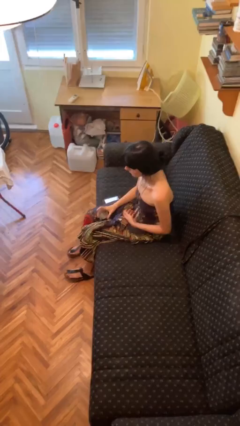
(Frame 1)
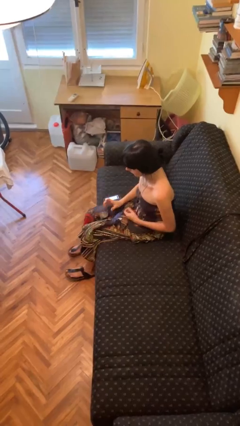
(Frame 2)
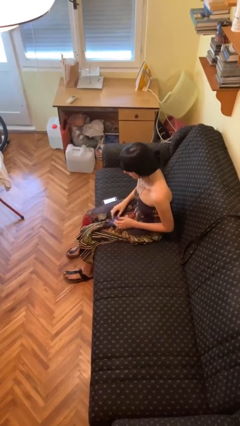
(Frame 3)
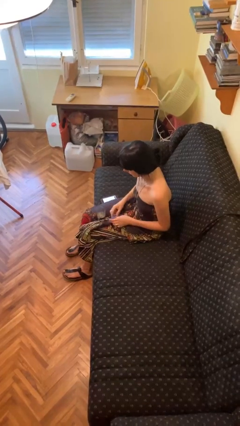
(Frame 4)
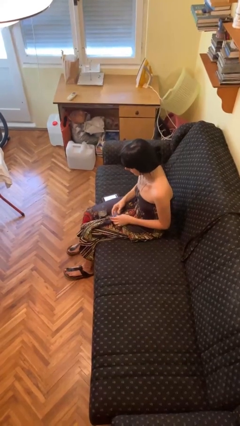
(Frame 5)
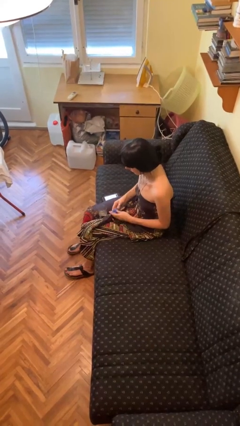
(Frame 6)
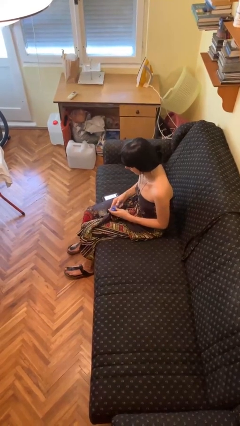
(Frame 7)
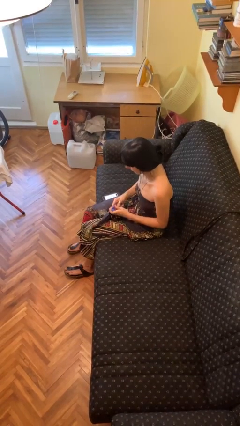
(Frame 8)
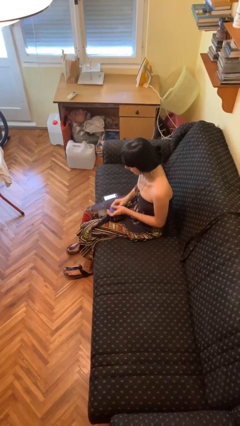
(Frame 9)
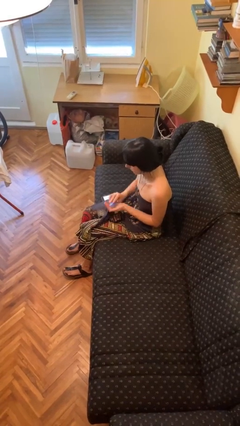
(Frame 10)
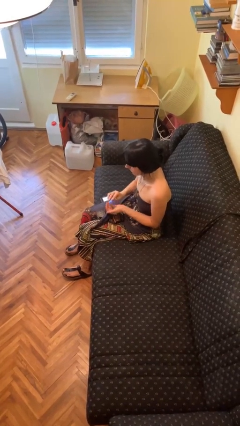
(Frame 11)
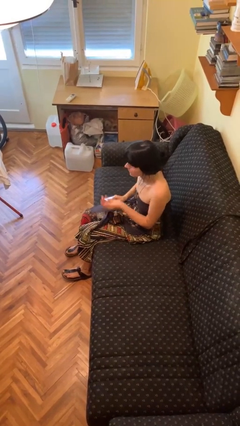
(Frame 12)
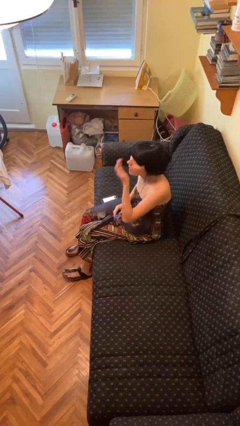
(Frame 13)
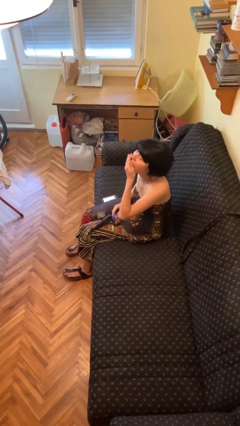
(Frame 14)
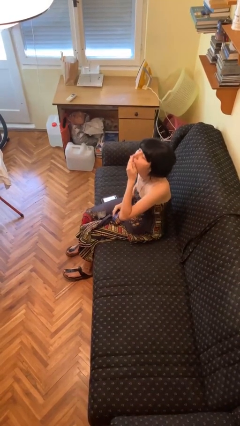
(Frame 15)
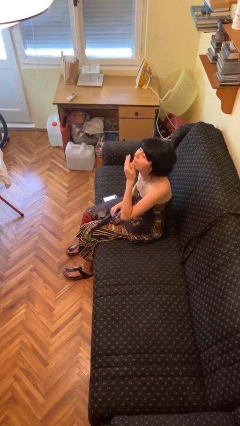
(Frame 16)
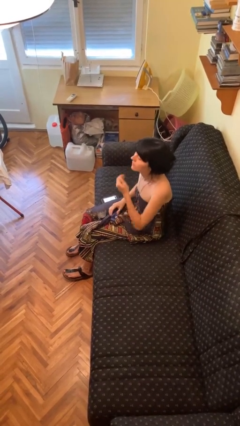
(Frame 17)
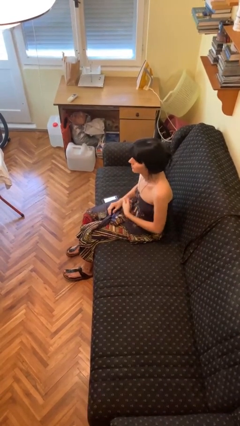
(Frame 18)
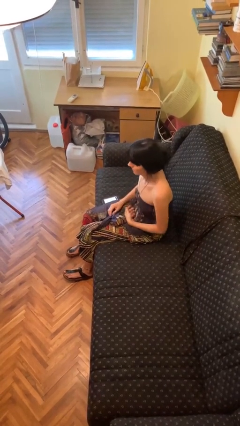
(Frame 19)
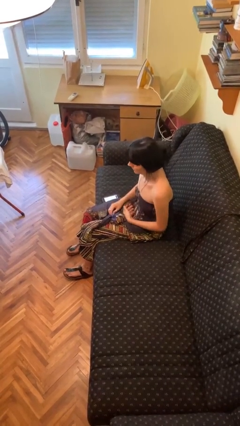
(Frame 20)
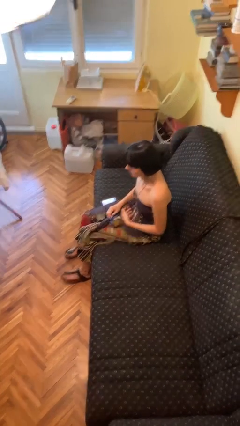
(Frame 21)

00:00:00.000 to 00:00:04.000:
person takes medicine pills

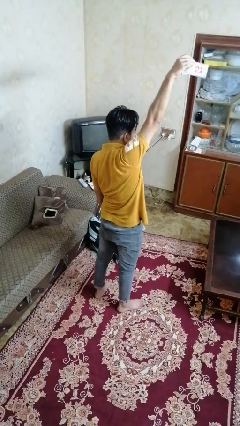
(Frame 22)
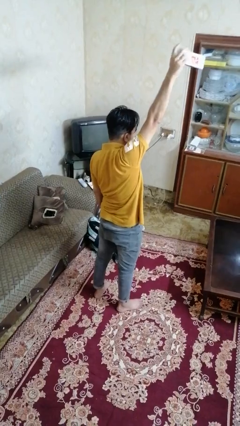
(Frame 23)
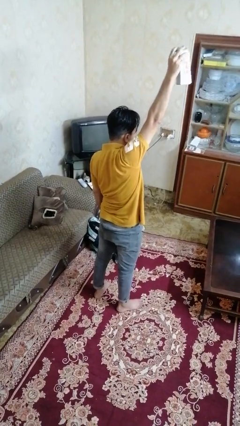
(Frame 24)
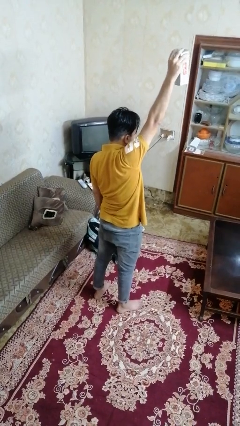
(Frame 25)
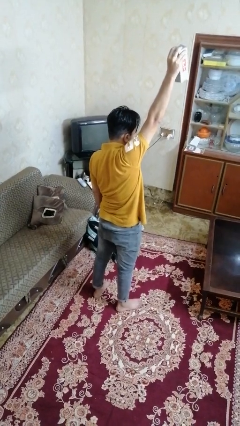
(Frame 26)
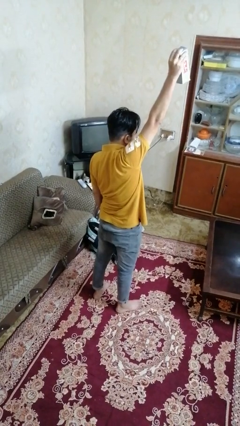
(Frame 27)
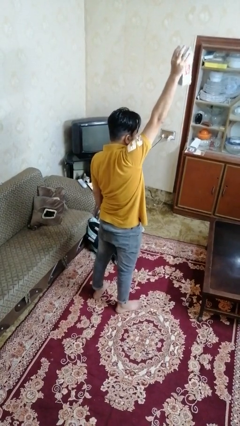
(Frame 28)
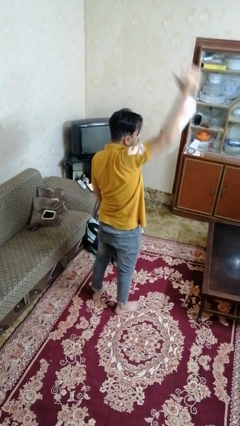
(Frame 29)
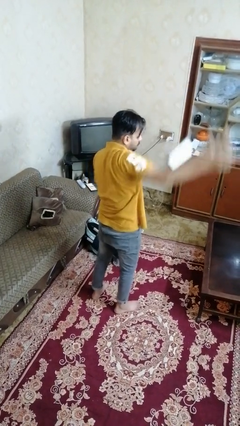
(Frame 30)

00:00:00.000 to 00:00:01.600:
person drops object

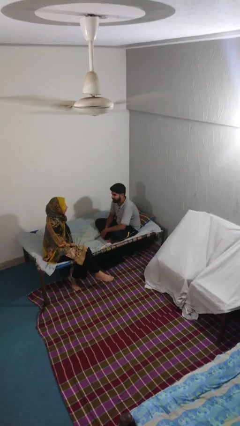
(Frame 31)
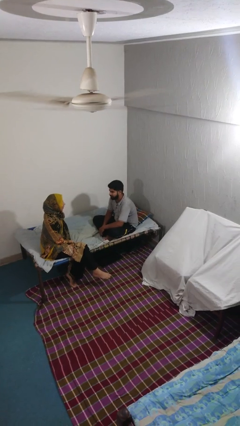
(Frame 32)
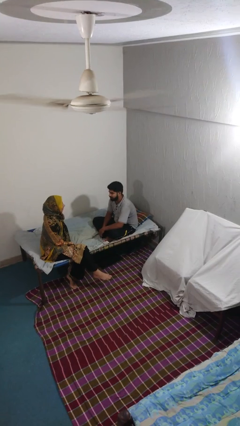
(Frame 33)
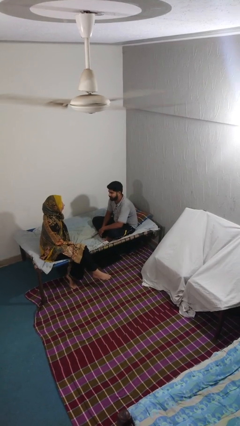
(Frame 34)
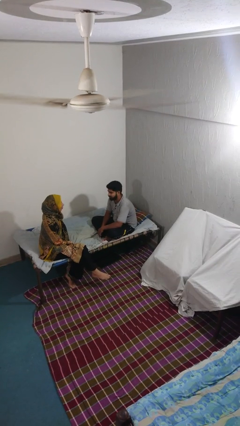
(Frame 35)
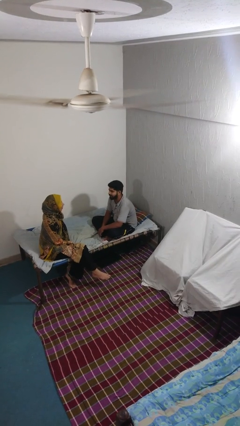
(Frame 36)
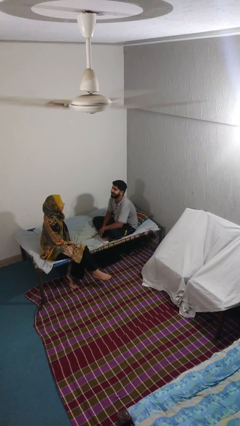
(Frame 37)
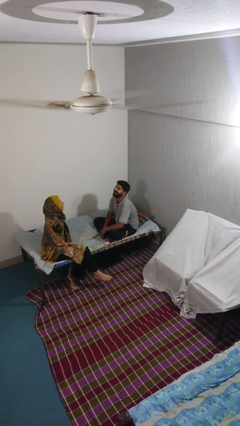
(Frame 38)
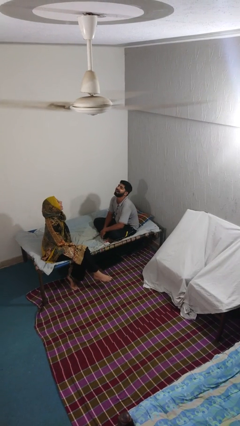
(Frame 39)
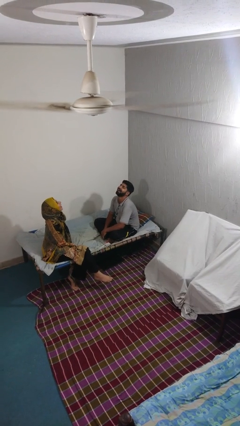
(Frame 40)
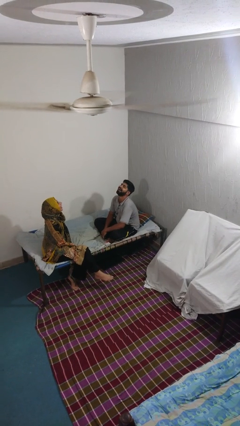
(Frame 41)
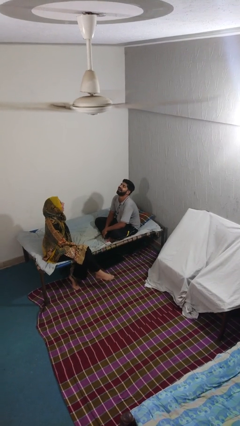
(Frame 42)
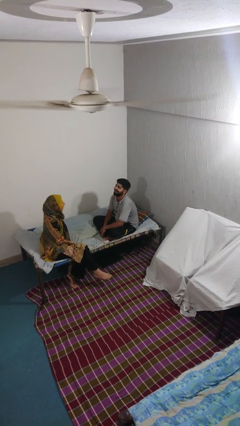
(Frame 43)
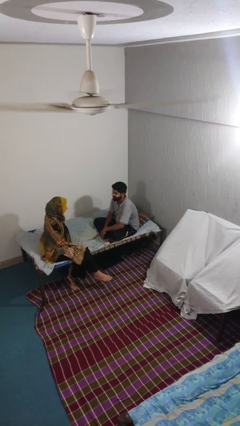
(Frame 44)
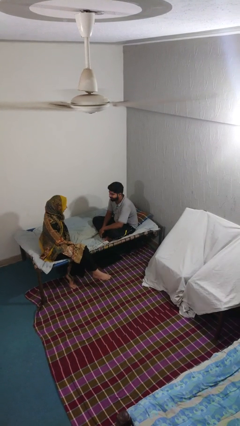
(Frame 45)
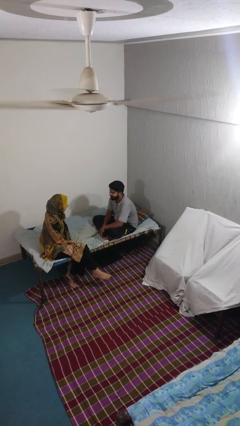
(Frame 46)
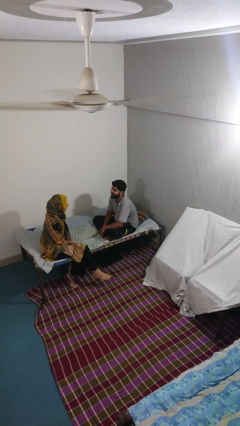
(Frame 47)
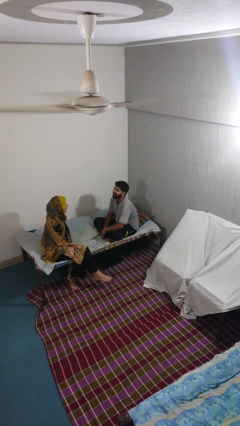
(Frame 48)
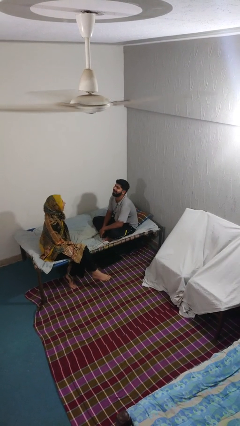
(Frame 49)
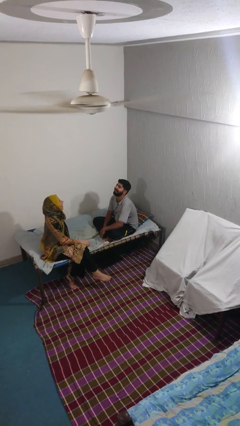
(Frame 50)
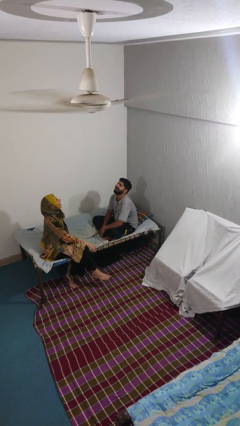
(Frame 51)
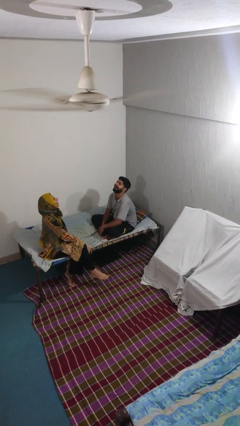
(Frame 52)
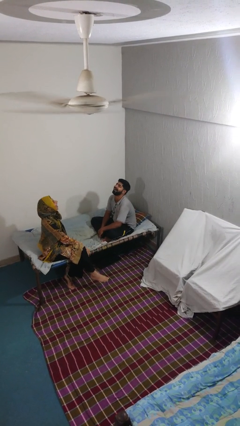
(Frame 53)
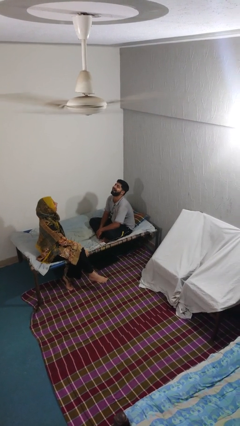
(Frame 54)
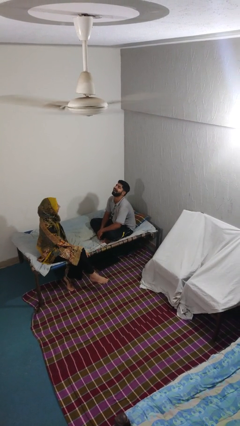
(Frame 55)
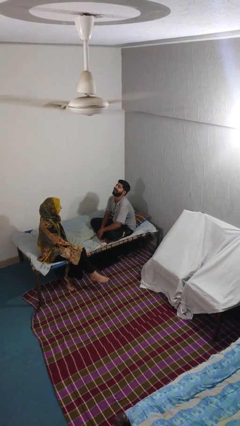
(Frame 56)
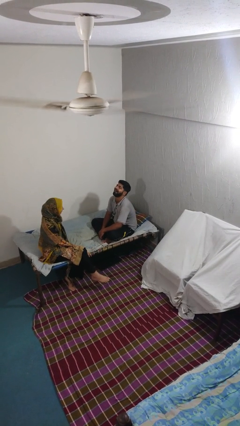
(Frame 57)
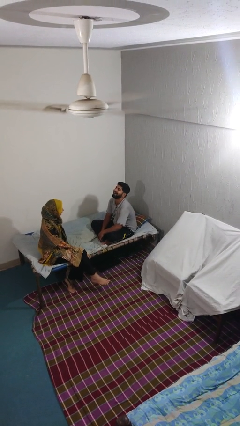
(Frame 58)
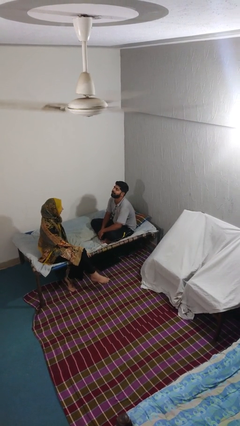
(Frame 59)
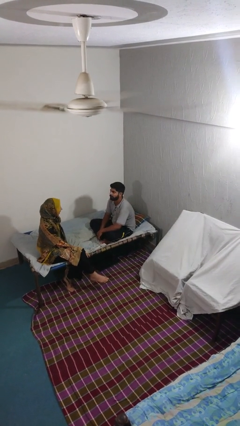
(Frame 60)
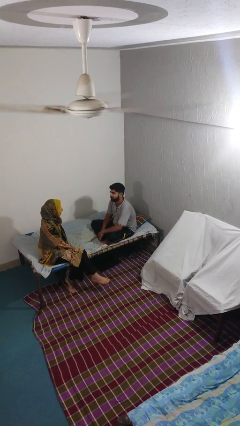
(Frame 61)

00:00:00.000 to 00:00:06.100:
person laughs with person

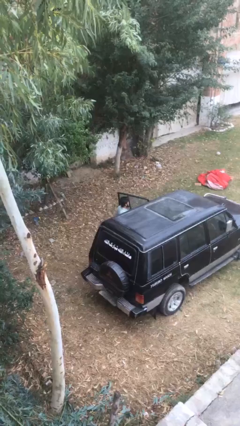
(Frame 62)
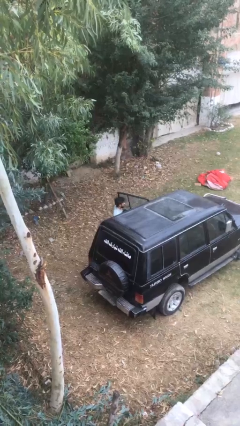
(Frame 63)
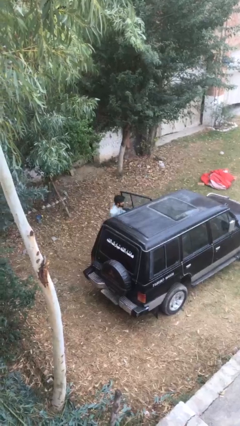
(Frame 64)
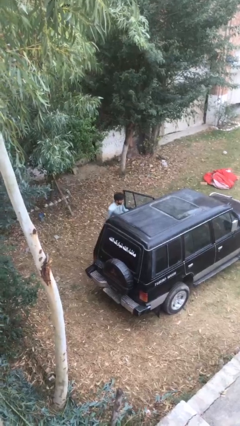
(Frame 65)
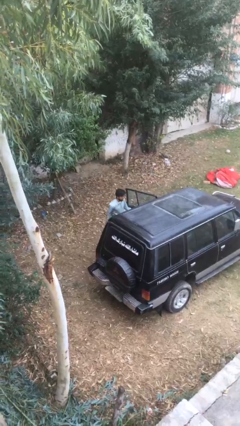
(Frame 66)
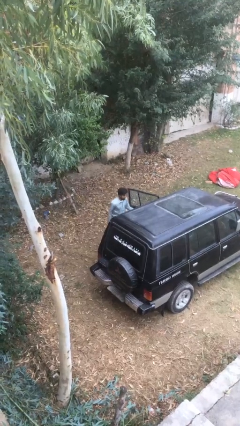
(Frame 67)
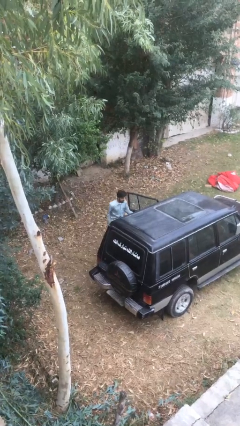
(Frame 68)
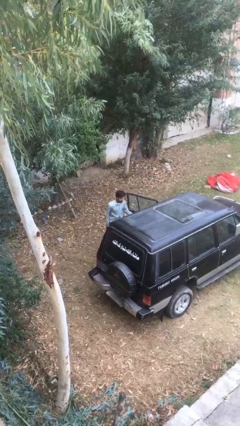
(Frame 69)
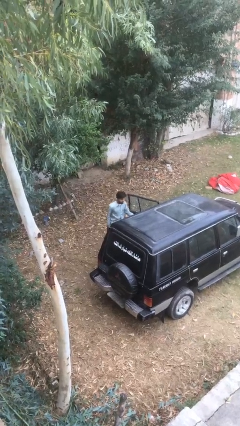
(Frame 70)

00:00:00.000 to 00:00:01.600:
person exits car

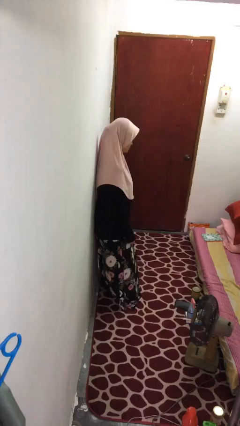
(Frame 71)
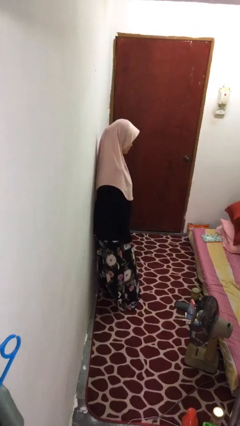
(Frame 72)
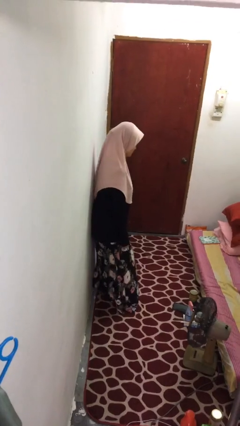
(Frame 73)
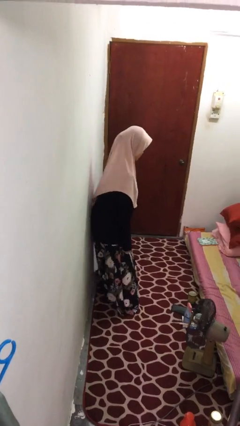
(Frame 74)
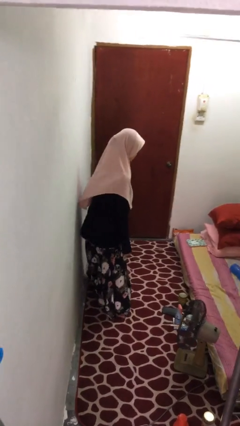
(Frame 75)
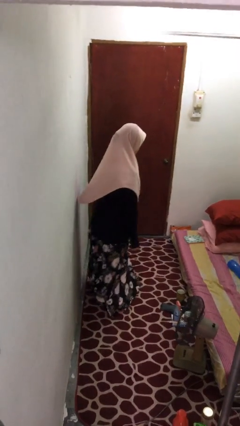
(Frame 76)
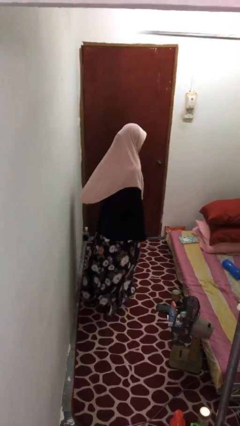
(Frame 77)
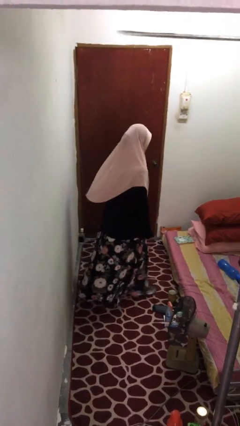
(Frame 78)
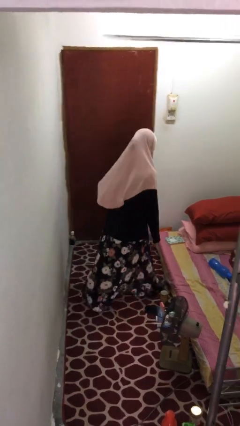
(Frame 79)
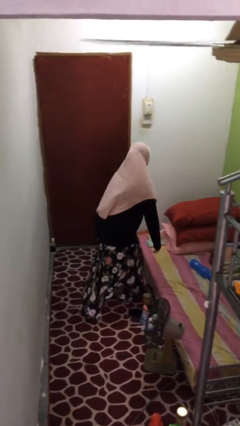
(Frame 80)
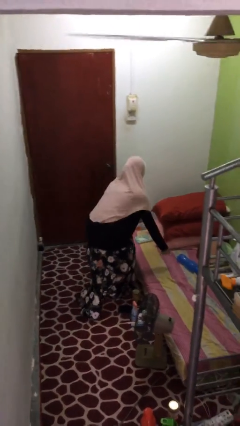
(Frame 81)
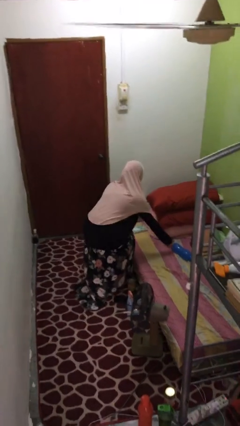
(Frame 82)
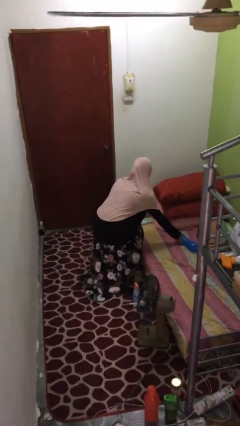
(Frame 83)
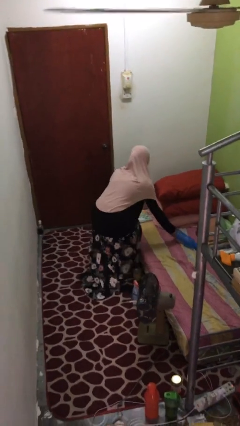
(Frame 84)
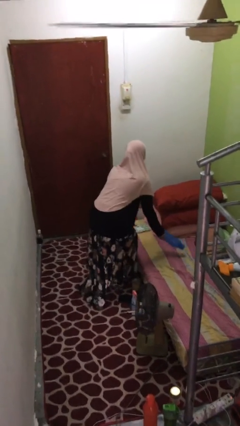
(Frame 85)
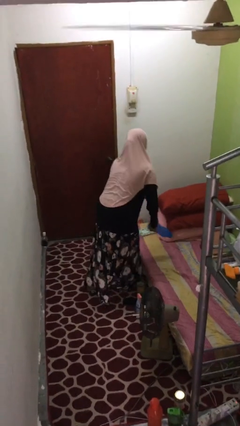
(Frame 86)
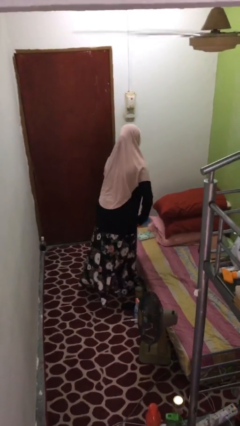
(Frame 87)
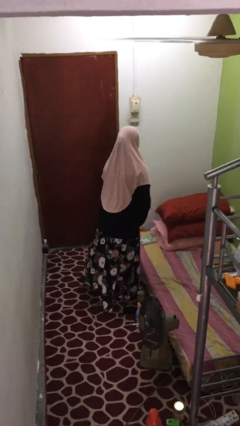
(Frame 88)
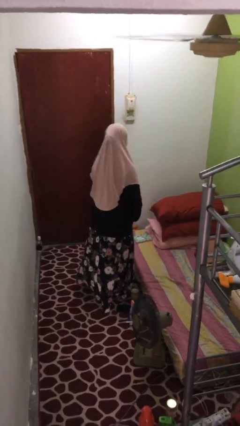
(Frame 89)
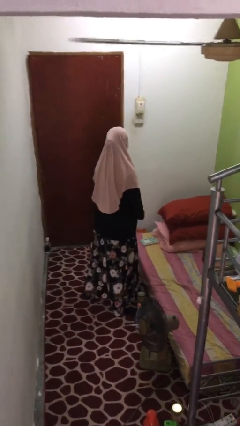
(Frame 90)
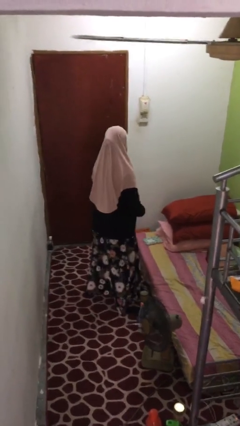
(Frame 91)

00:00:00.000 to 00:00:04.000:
person picks up object from bed

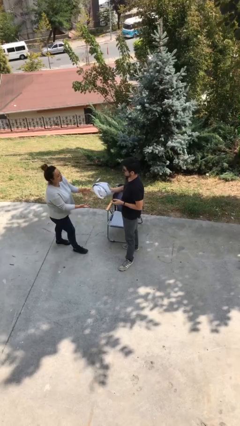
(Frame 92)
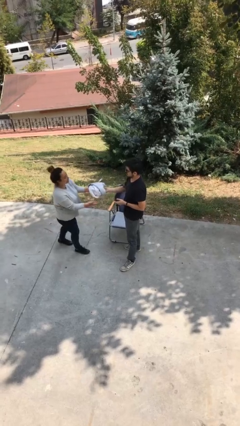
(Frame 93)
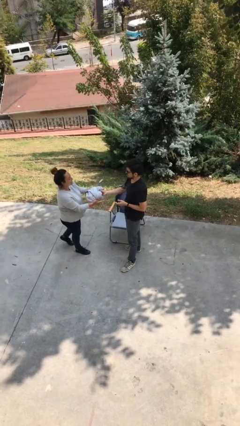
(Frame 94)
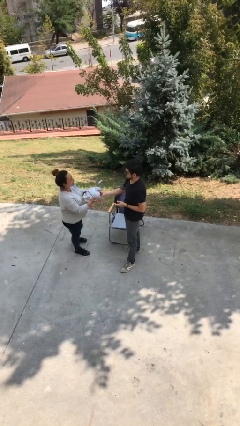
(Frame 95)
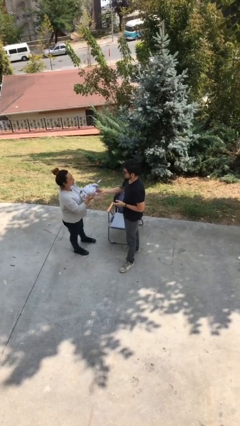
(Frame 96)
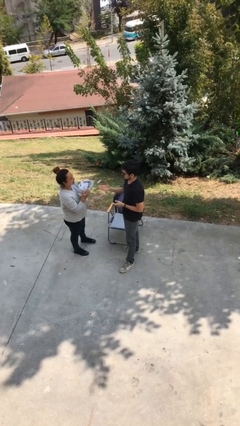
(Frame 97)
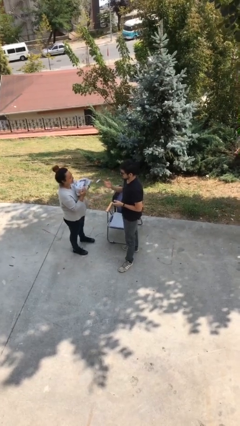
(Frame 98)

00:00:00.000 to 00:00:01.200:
person transfers object to person
